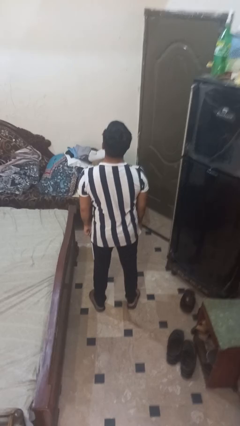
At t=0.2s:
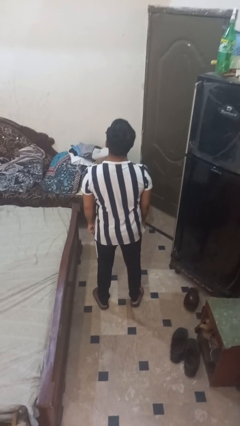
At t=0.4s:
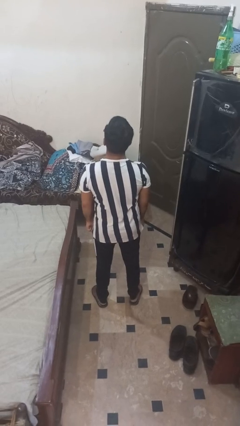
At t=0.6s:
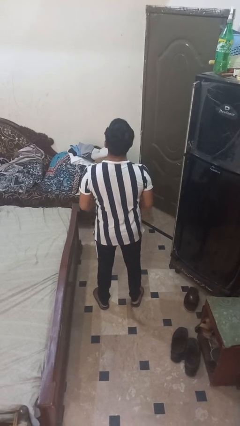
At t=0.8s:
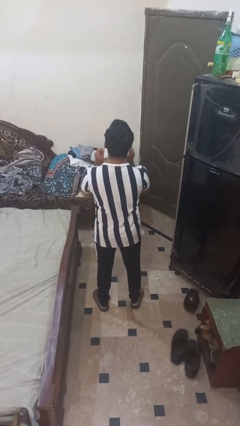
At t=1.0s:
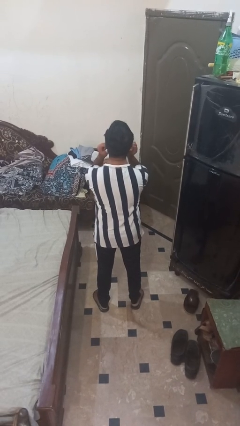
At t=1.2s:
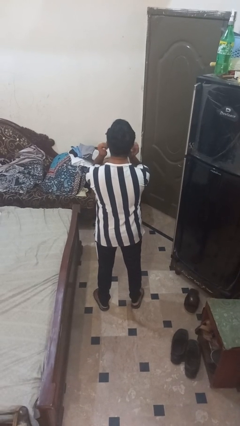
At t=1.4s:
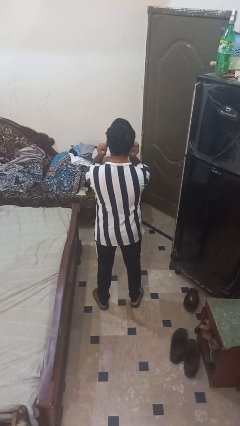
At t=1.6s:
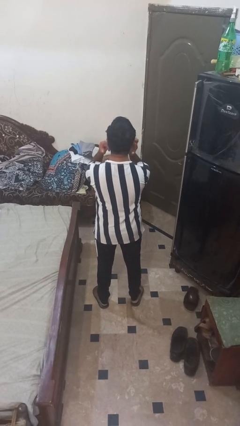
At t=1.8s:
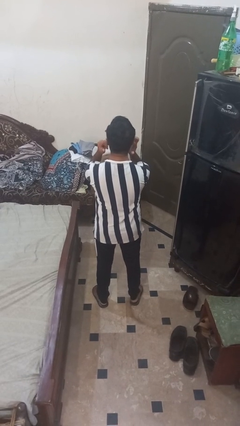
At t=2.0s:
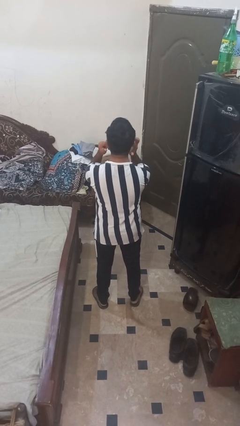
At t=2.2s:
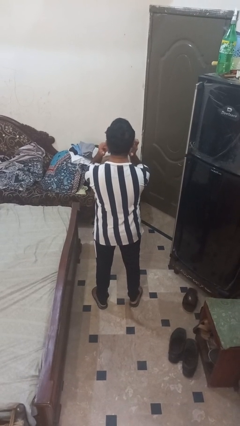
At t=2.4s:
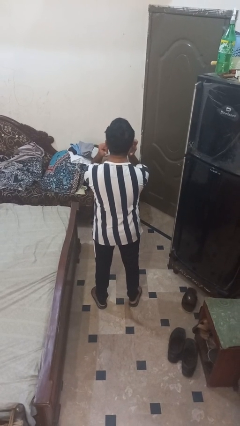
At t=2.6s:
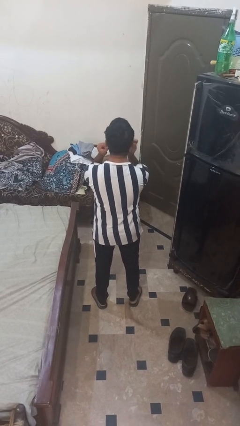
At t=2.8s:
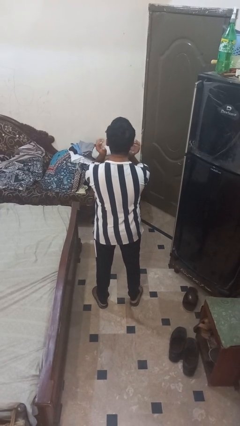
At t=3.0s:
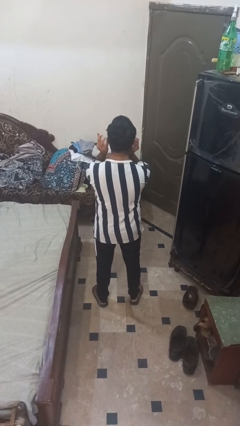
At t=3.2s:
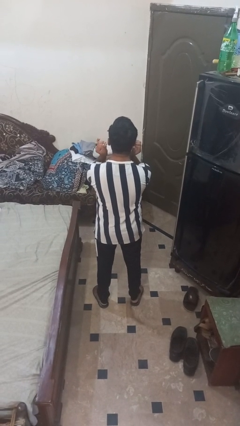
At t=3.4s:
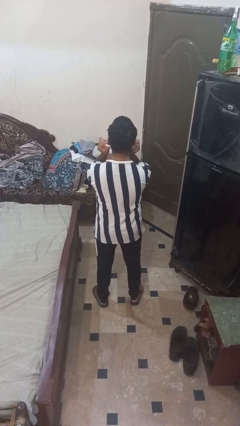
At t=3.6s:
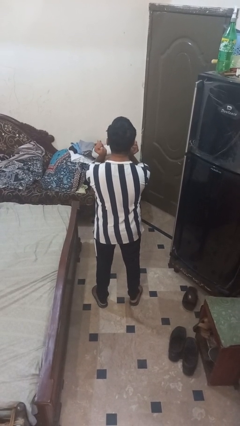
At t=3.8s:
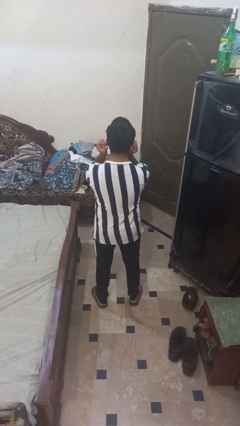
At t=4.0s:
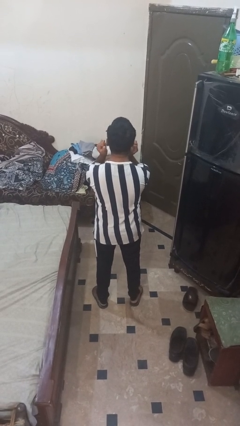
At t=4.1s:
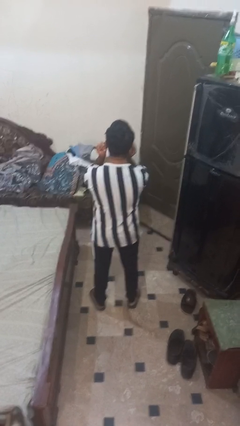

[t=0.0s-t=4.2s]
person touches earlobe

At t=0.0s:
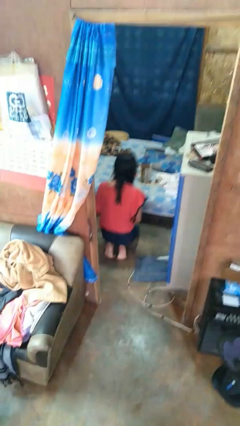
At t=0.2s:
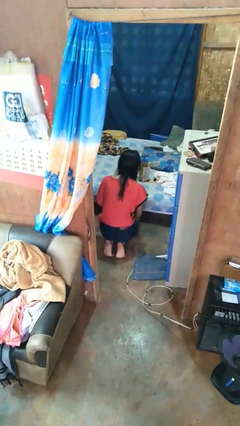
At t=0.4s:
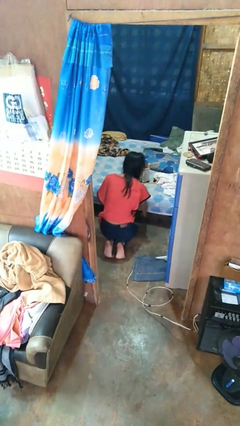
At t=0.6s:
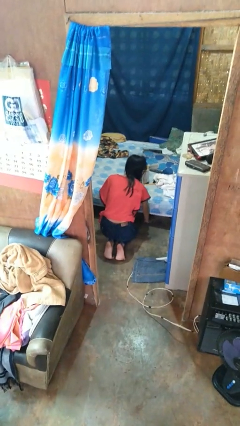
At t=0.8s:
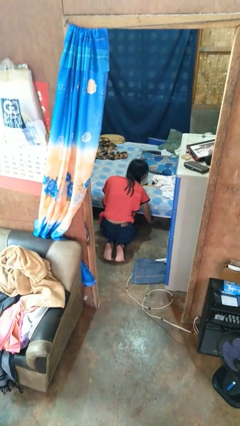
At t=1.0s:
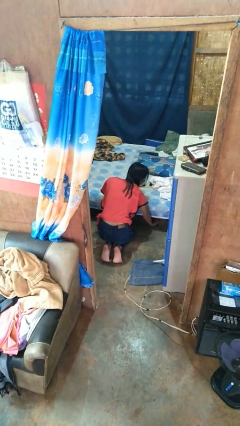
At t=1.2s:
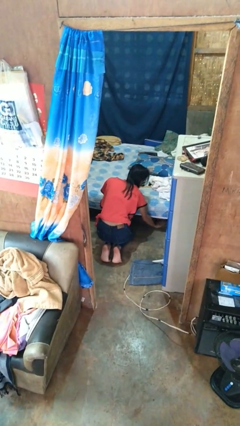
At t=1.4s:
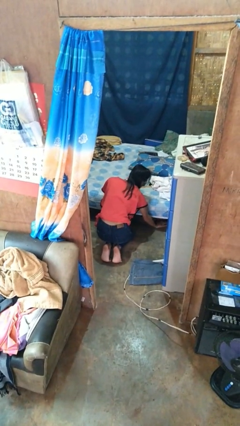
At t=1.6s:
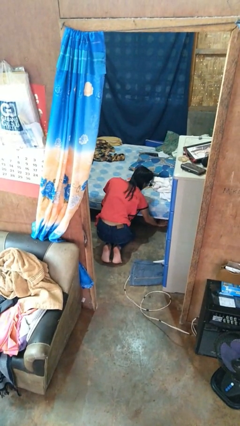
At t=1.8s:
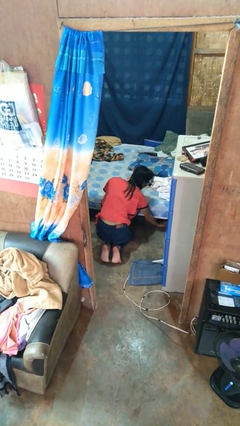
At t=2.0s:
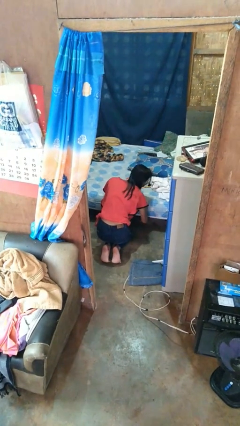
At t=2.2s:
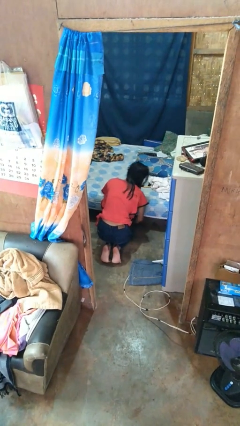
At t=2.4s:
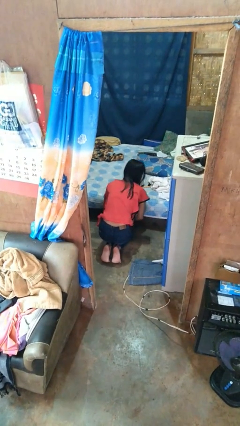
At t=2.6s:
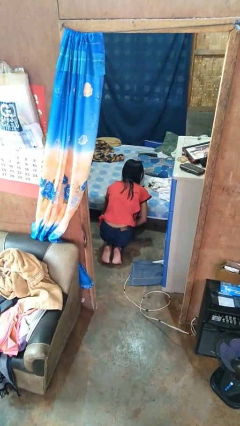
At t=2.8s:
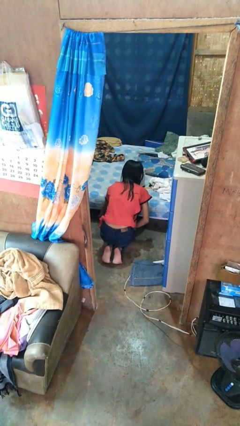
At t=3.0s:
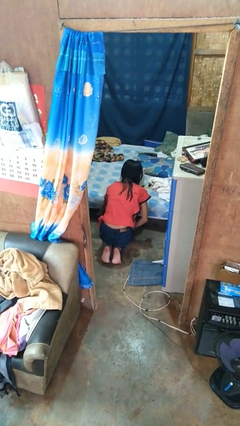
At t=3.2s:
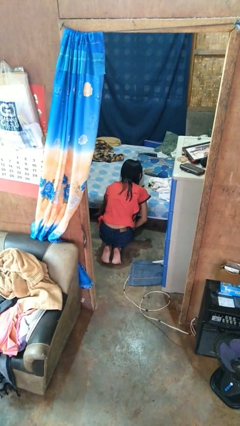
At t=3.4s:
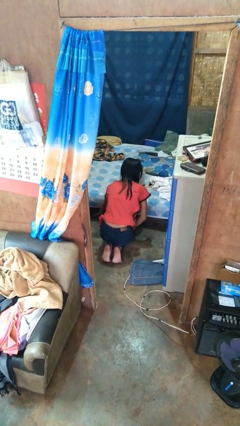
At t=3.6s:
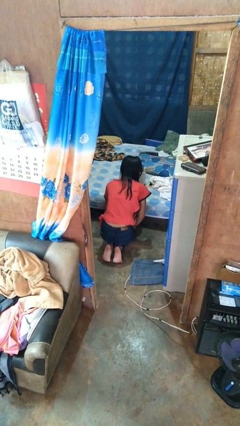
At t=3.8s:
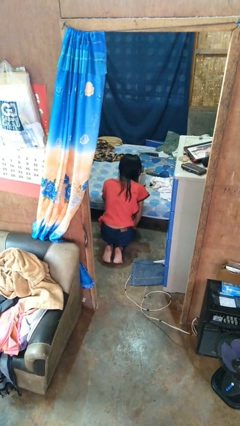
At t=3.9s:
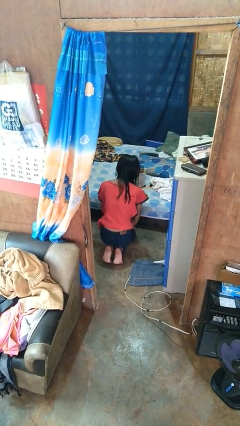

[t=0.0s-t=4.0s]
person searches under bed

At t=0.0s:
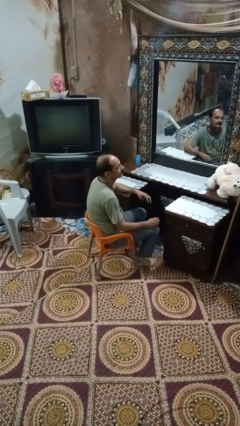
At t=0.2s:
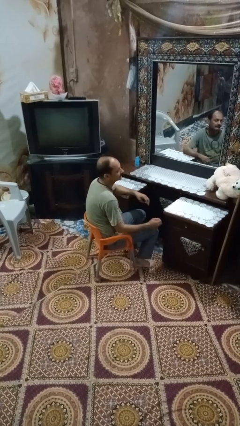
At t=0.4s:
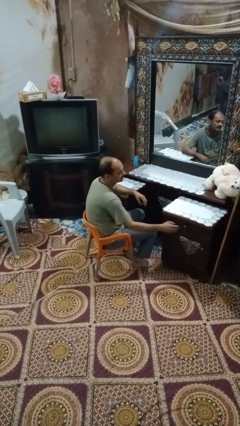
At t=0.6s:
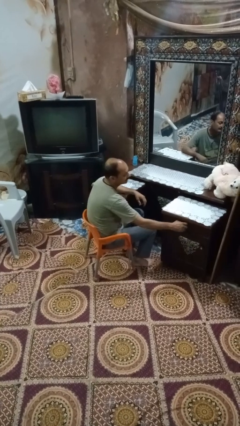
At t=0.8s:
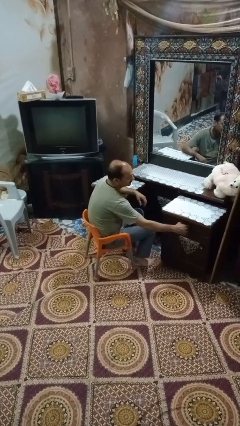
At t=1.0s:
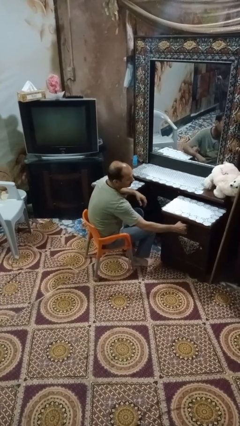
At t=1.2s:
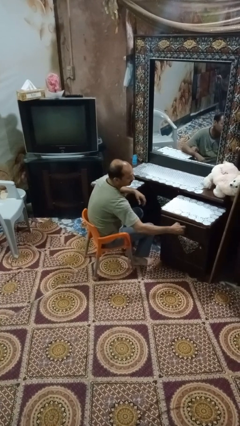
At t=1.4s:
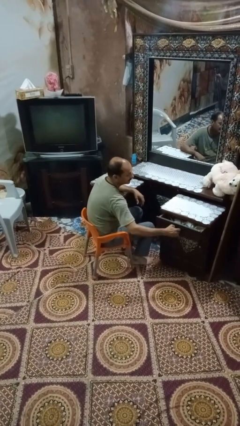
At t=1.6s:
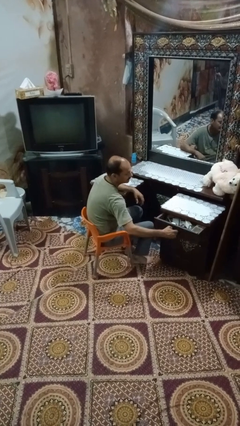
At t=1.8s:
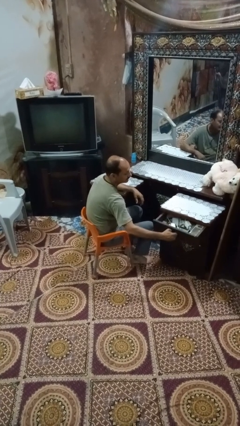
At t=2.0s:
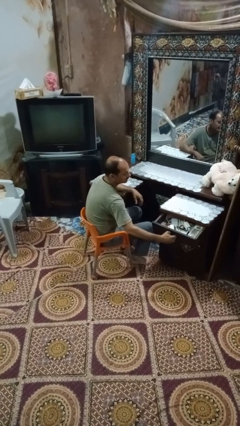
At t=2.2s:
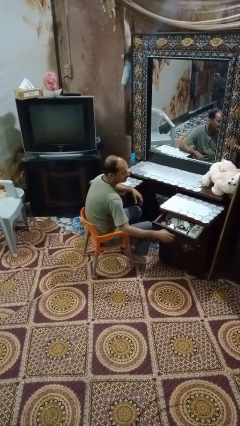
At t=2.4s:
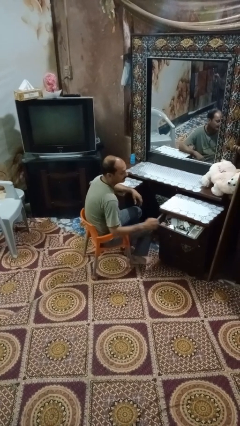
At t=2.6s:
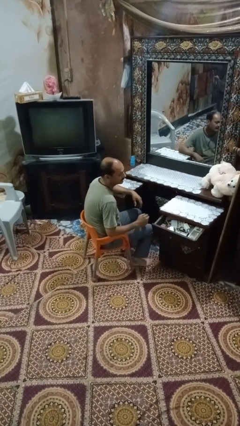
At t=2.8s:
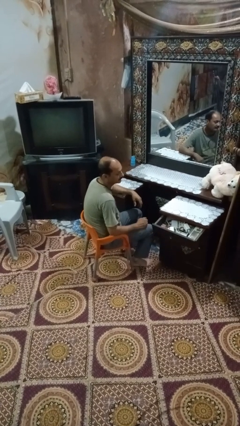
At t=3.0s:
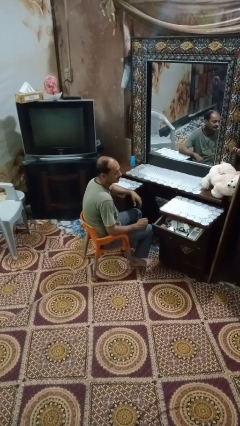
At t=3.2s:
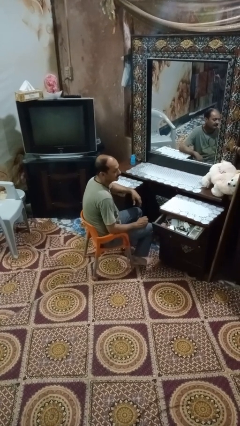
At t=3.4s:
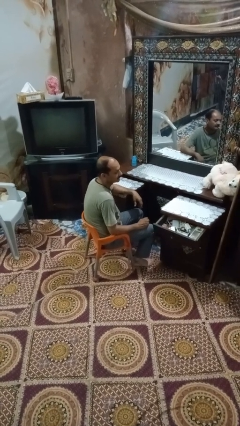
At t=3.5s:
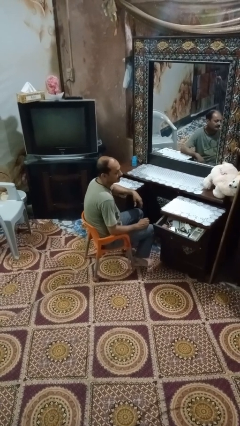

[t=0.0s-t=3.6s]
person opens dresser drawer

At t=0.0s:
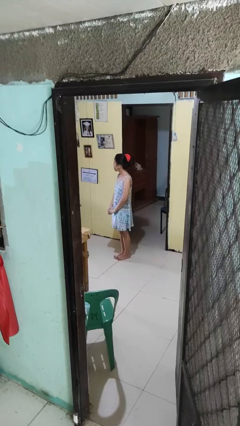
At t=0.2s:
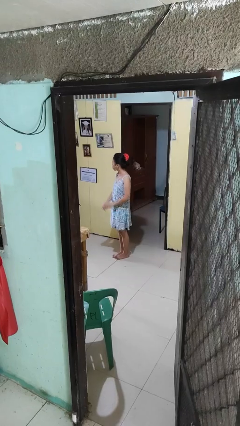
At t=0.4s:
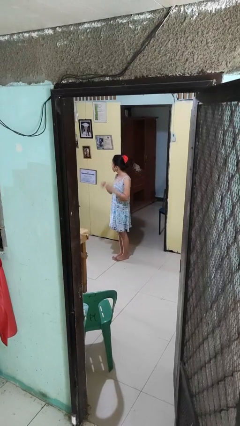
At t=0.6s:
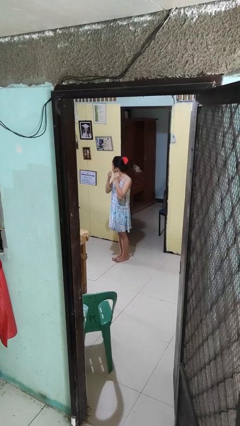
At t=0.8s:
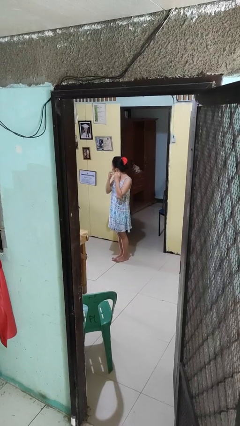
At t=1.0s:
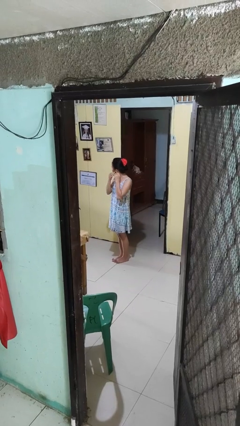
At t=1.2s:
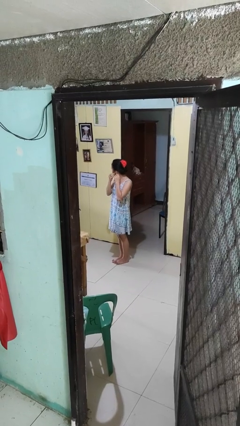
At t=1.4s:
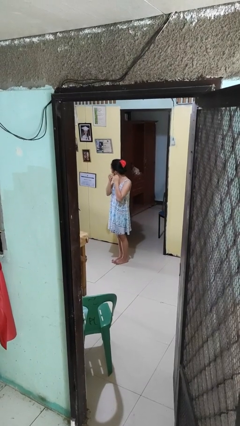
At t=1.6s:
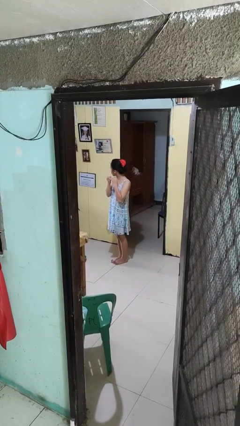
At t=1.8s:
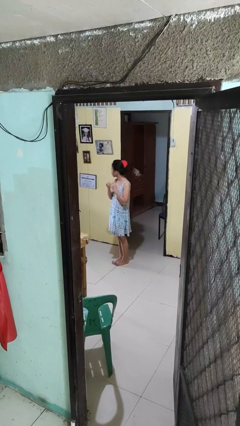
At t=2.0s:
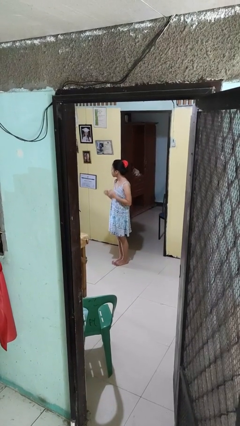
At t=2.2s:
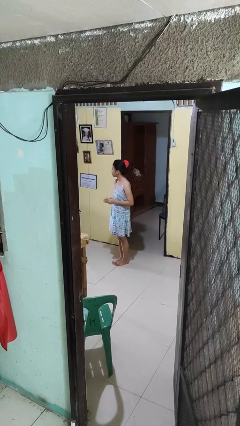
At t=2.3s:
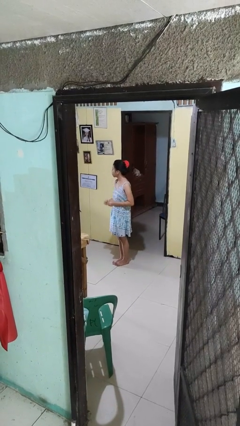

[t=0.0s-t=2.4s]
person takes off earrings

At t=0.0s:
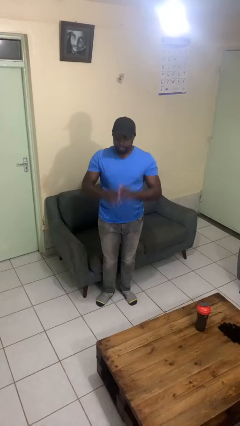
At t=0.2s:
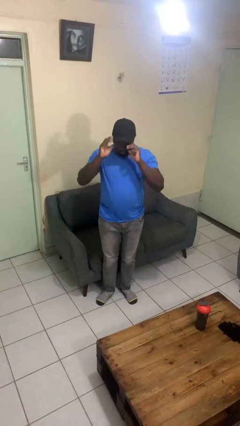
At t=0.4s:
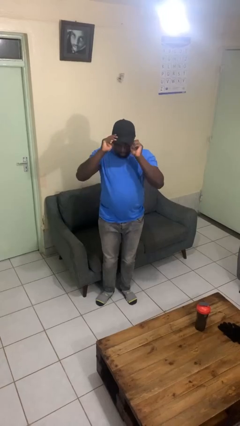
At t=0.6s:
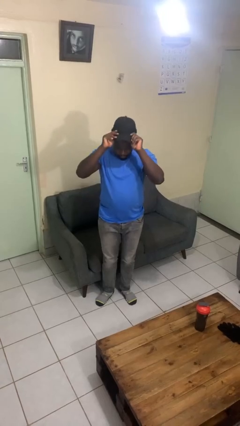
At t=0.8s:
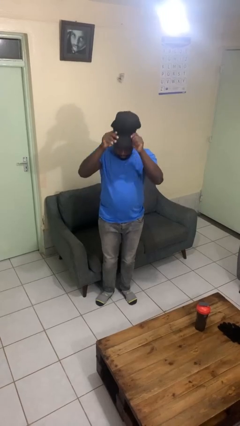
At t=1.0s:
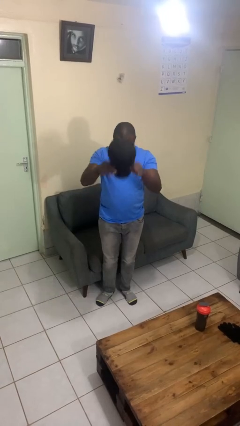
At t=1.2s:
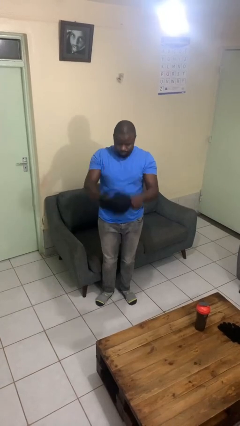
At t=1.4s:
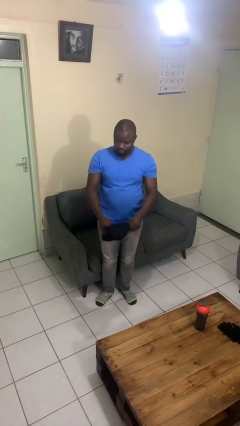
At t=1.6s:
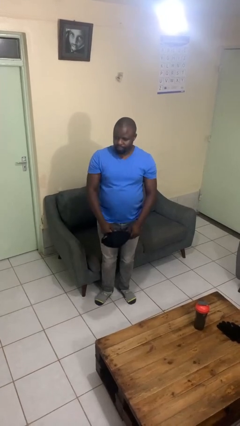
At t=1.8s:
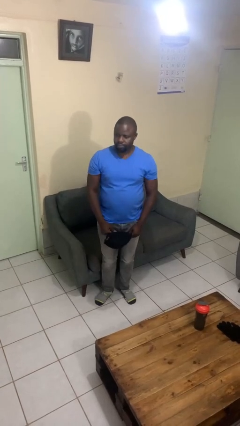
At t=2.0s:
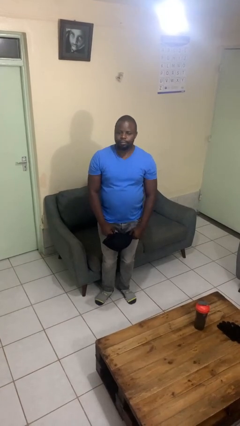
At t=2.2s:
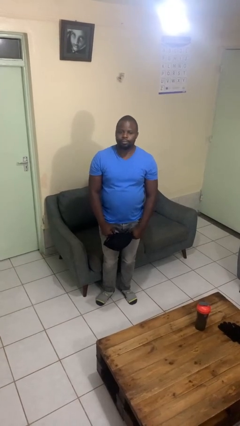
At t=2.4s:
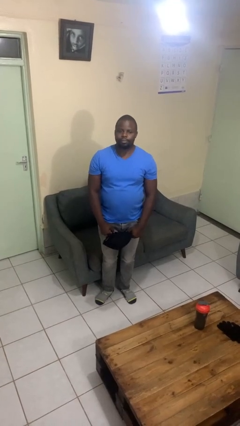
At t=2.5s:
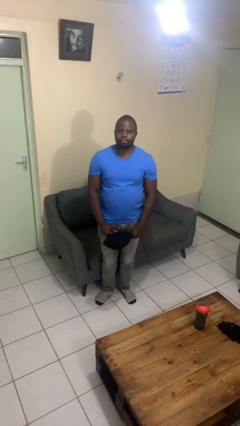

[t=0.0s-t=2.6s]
person takes off hat

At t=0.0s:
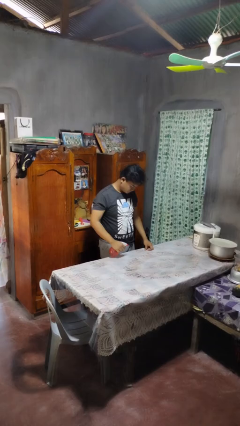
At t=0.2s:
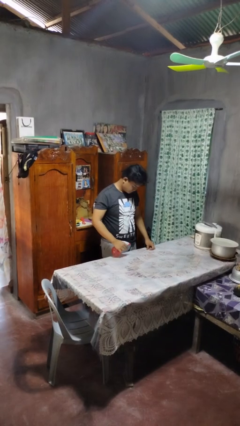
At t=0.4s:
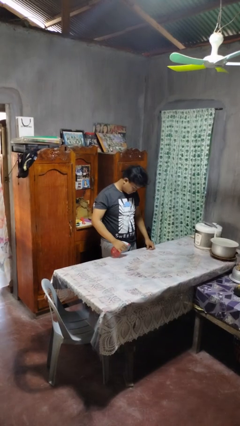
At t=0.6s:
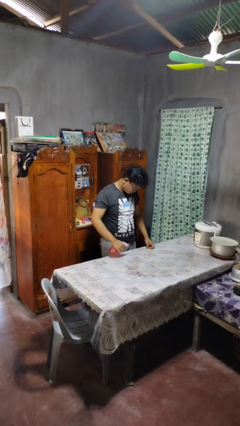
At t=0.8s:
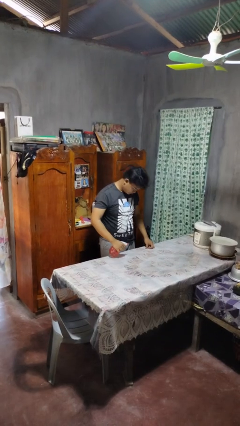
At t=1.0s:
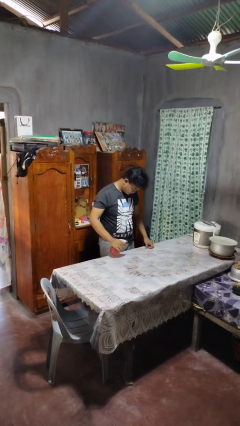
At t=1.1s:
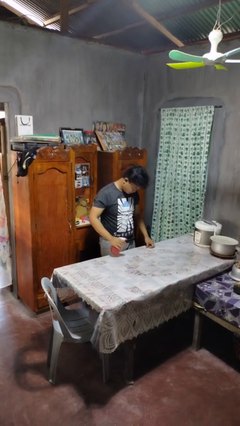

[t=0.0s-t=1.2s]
person sprays from bottle
